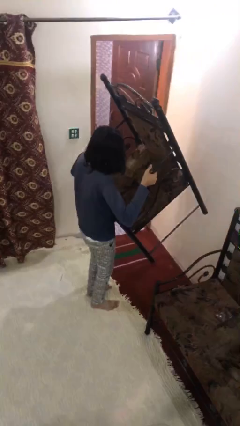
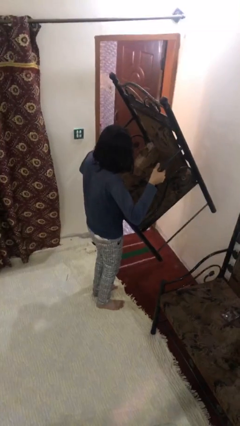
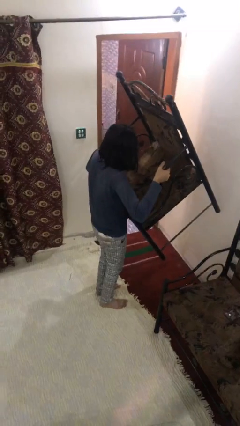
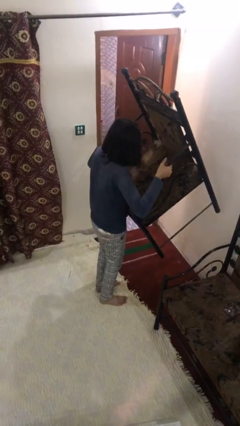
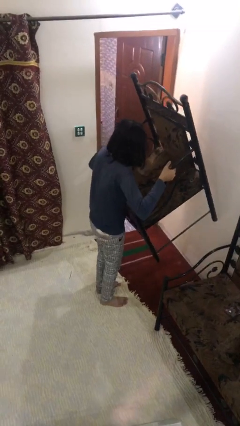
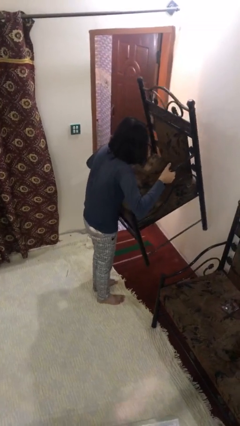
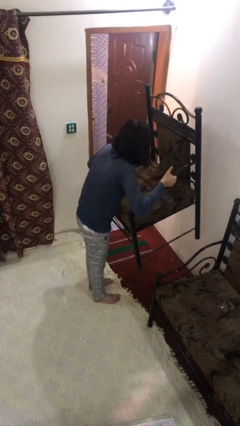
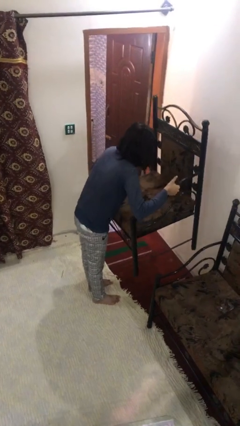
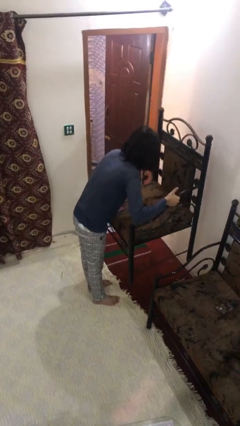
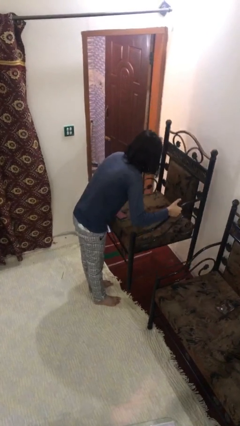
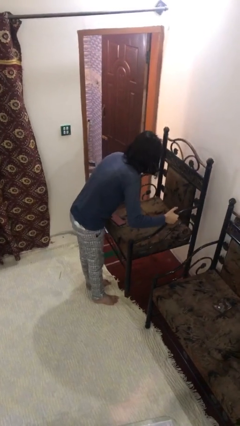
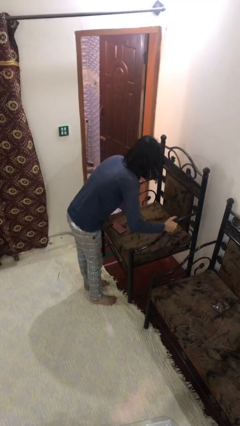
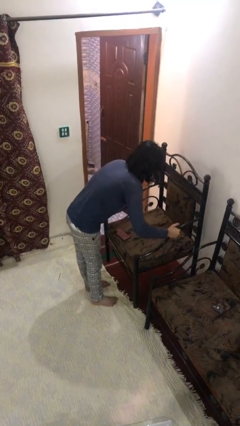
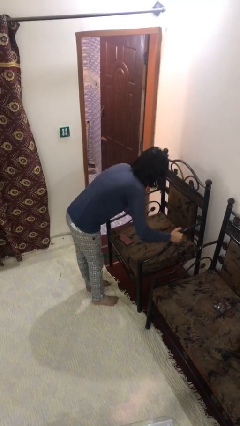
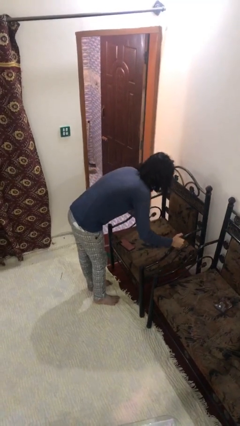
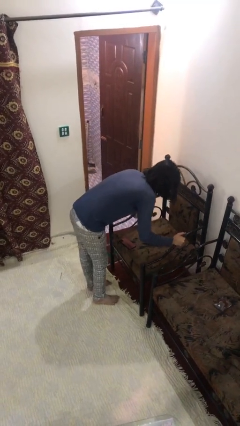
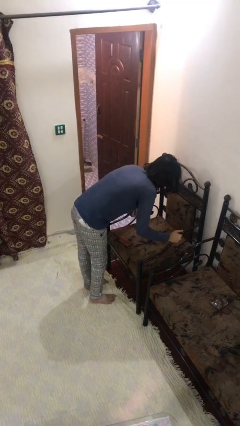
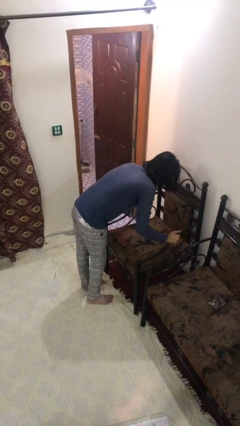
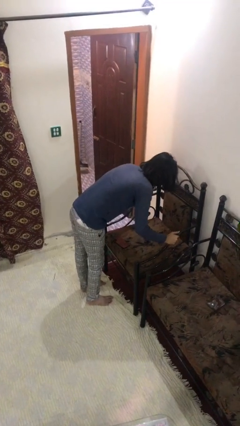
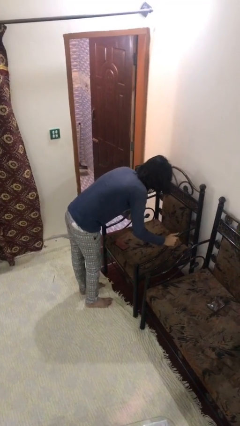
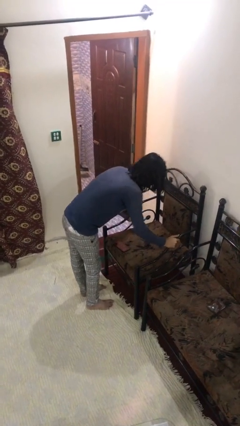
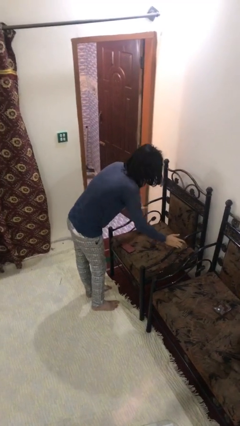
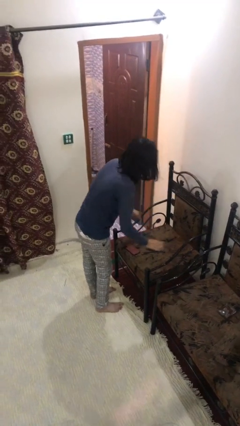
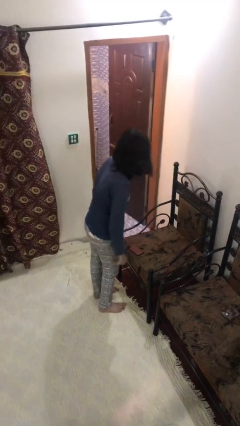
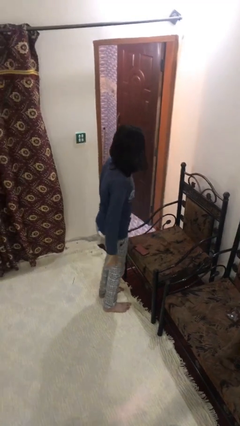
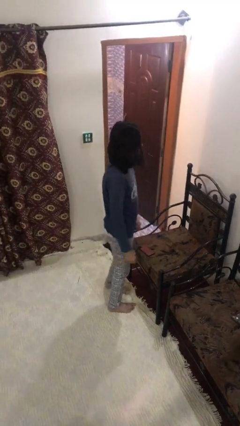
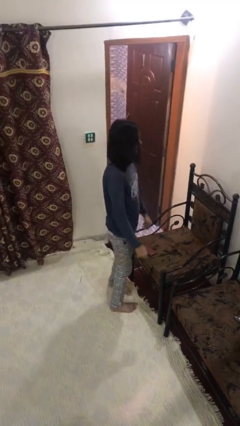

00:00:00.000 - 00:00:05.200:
person puts down object on floor

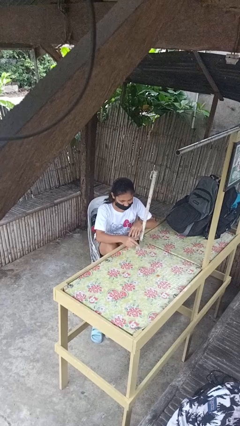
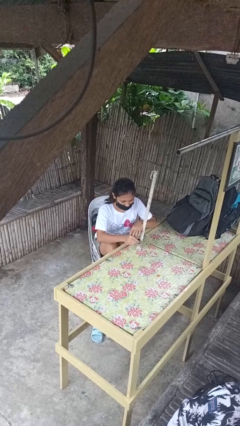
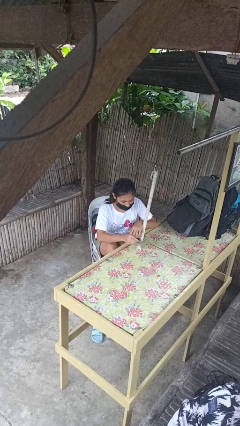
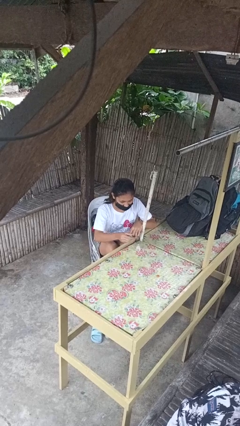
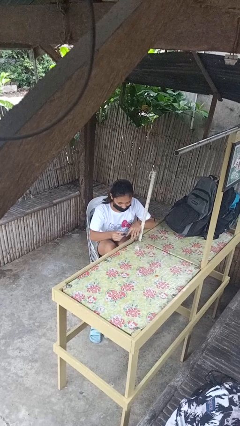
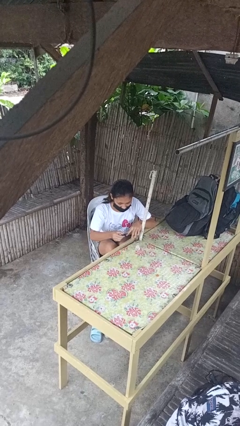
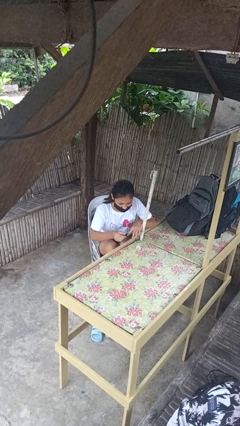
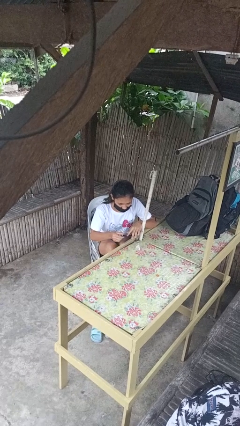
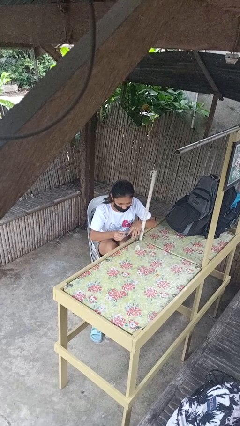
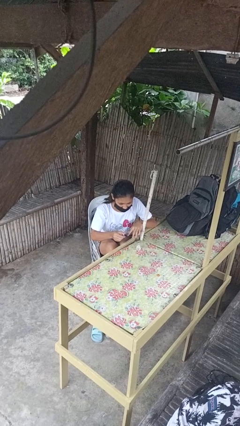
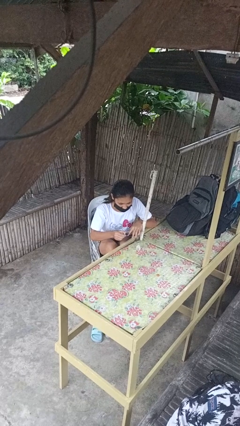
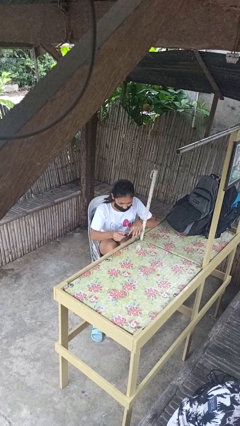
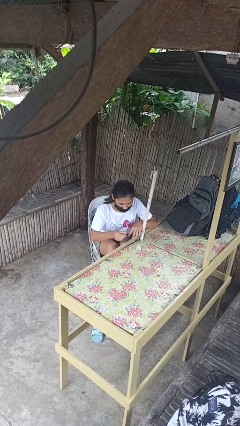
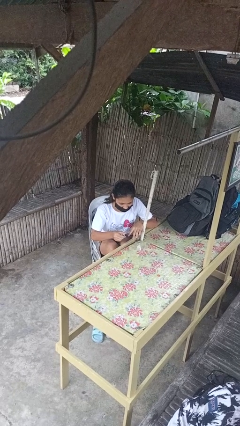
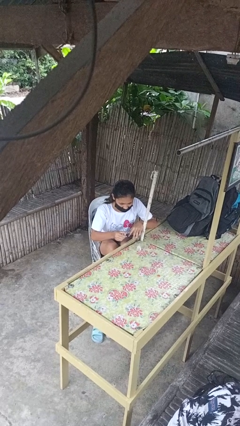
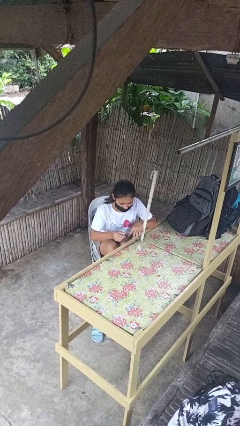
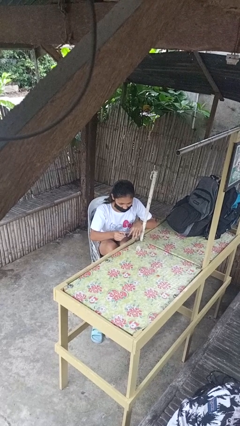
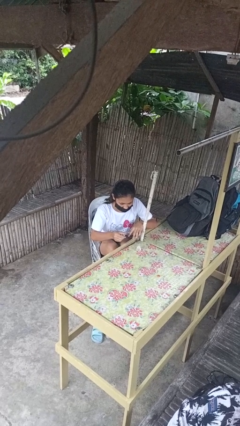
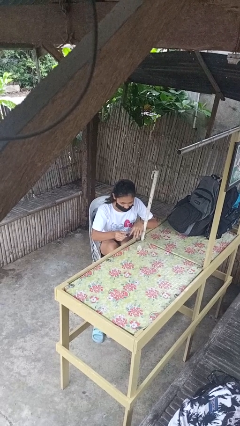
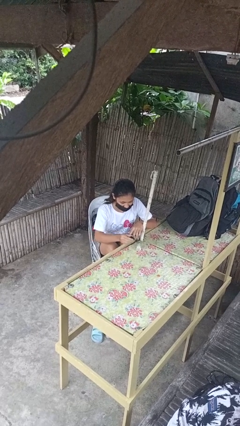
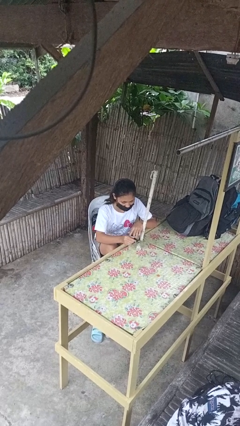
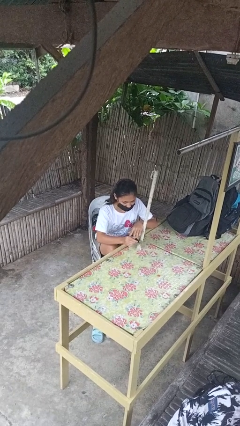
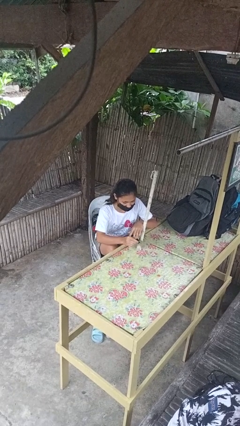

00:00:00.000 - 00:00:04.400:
person paints fingernails

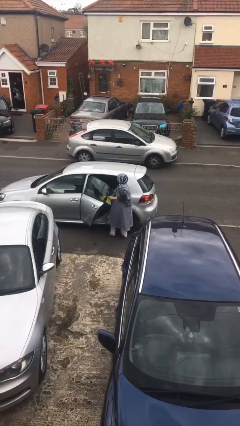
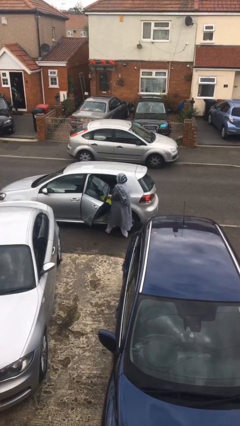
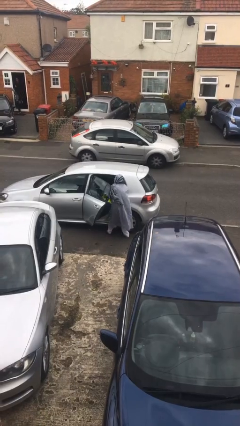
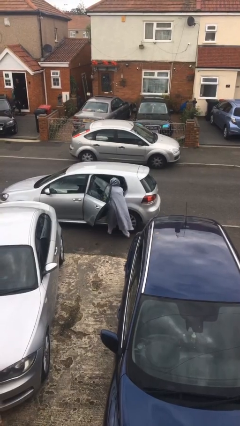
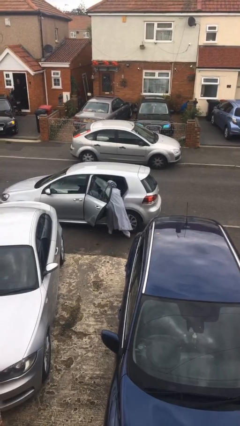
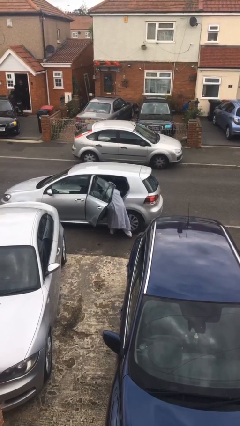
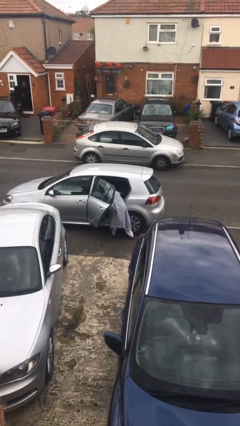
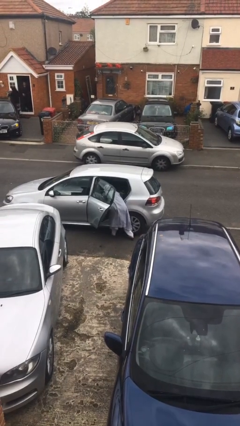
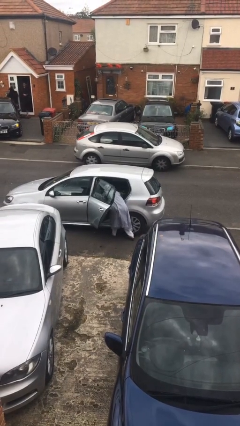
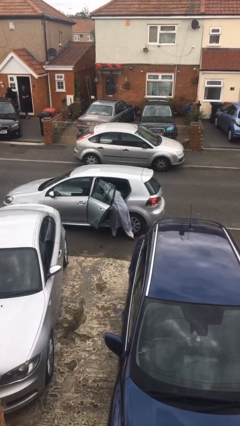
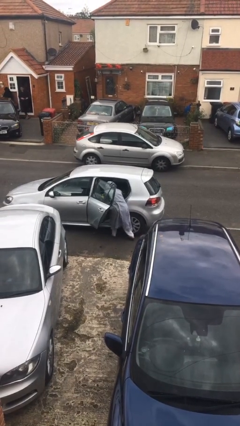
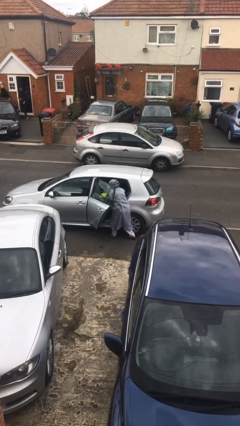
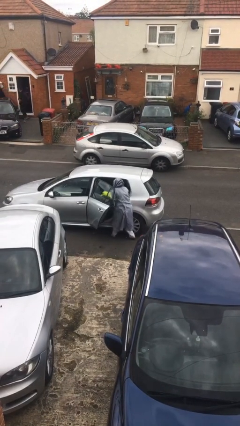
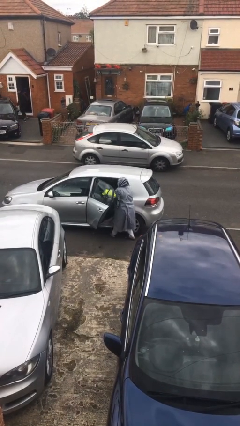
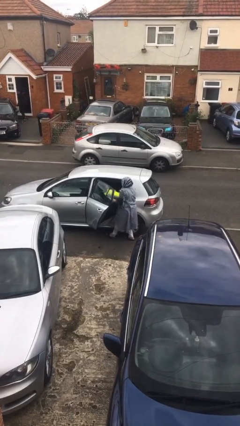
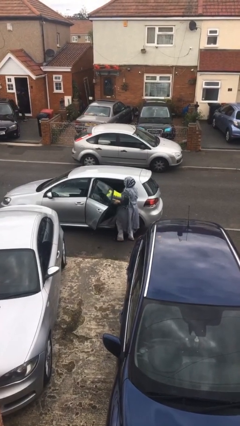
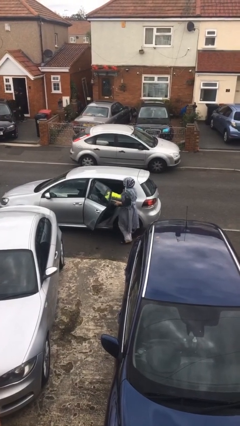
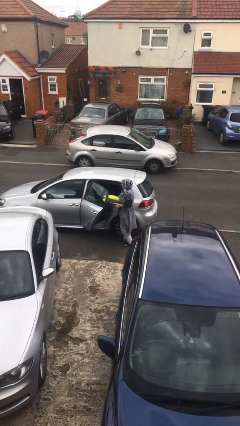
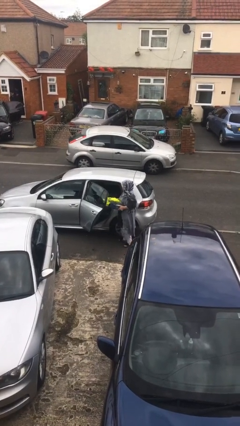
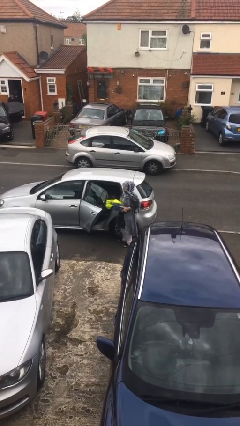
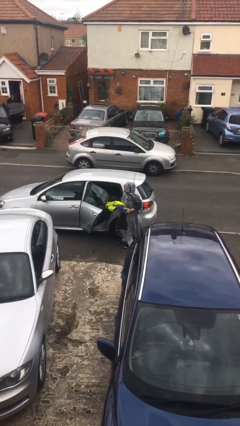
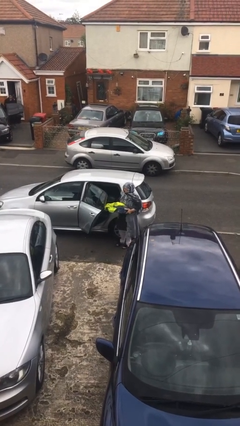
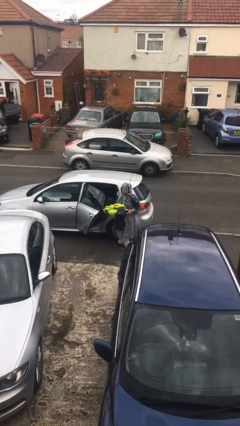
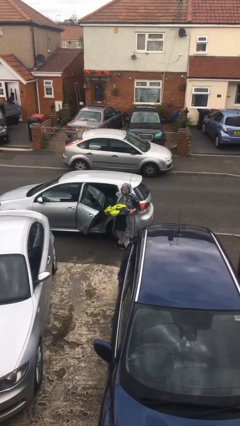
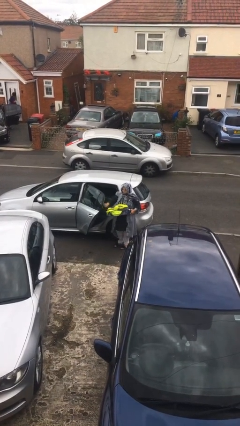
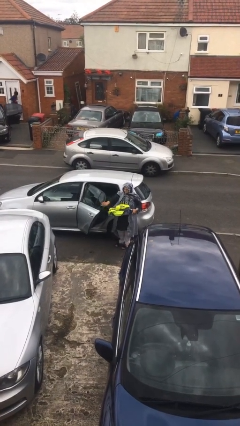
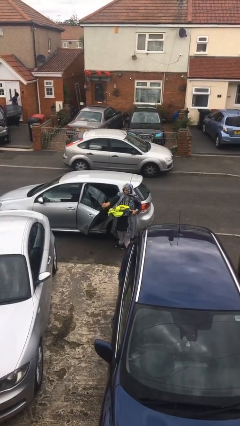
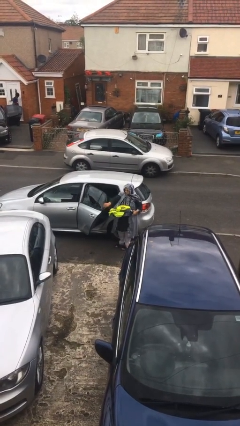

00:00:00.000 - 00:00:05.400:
person unloads car

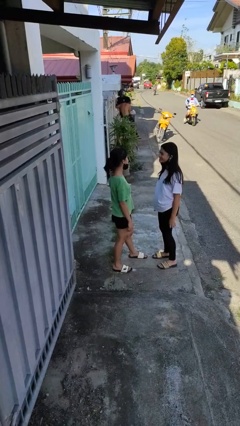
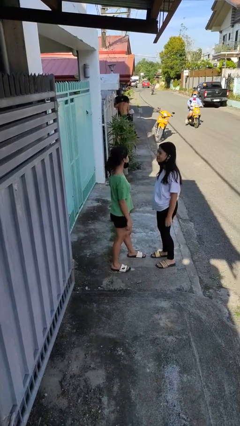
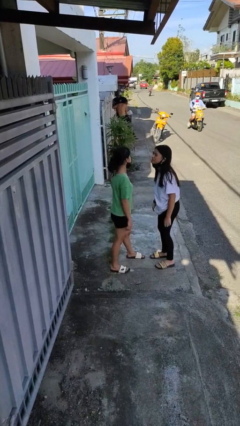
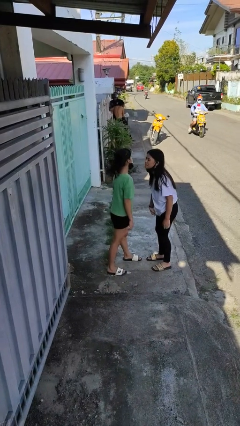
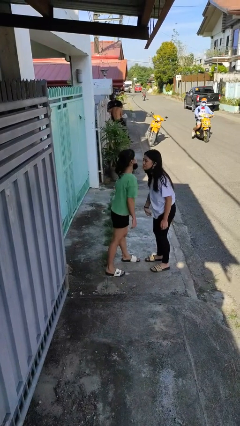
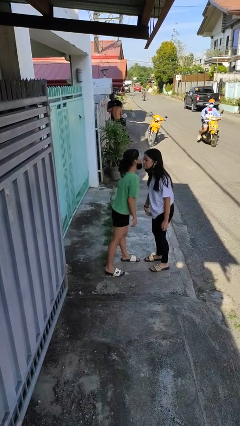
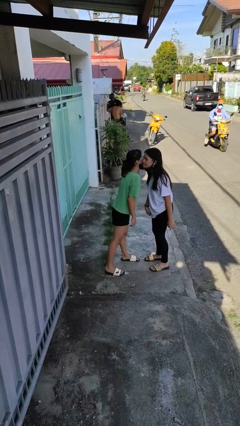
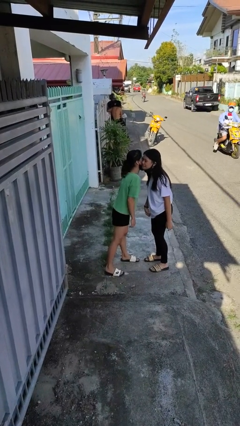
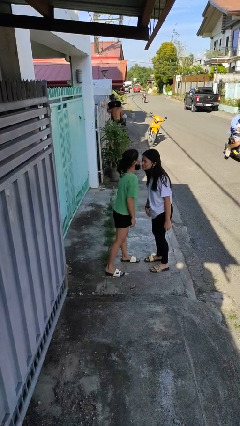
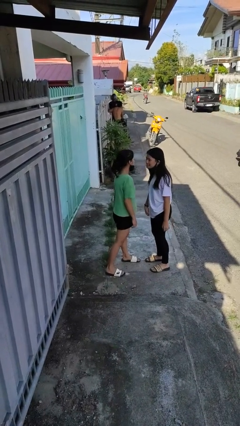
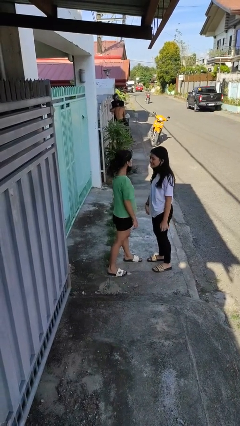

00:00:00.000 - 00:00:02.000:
person kisses cheek of person

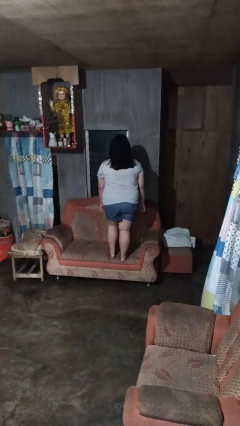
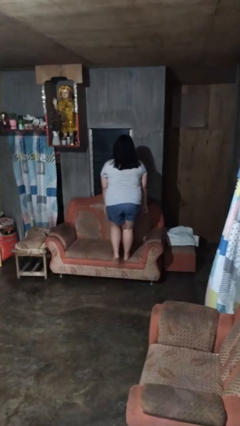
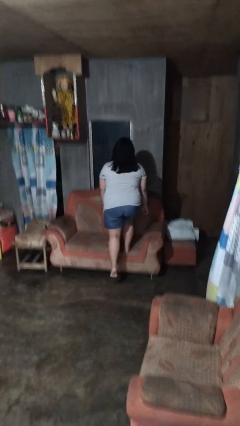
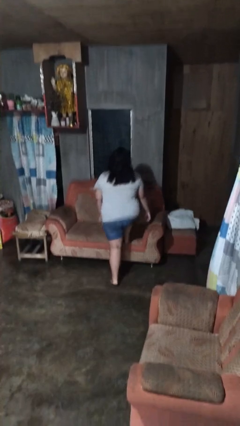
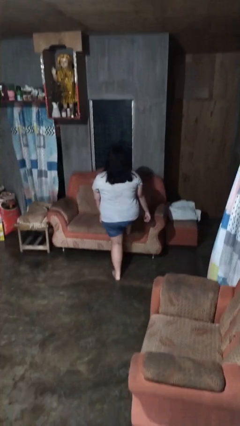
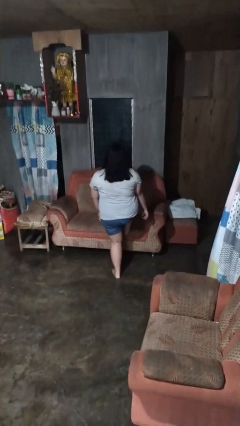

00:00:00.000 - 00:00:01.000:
person climbs off couch
